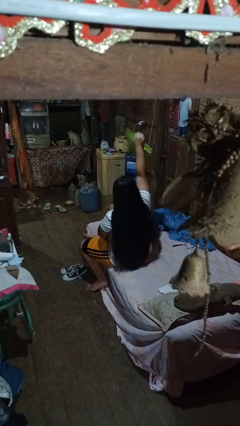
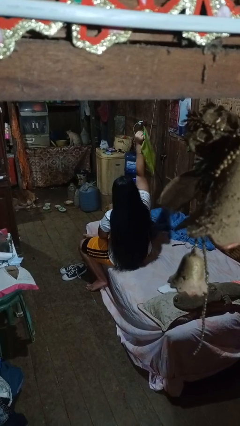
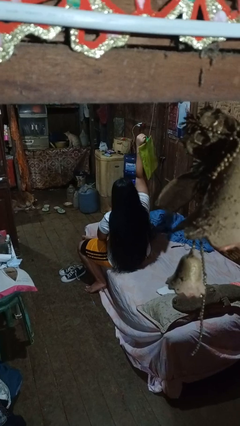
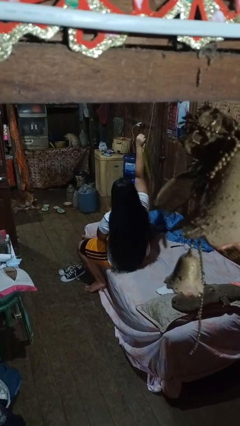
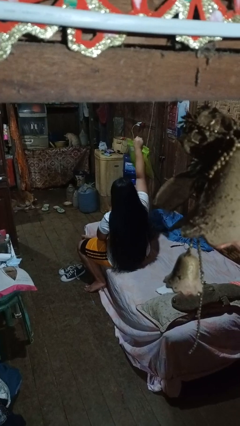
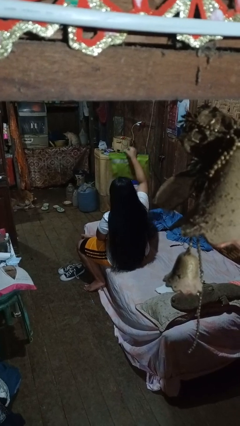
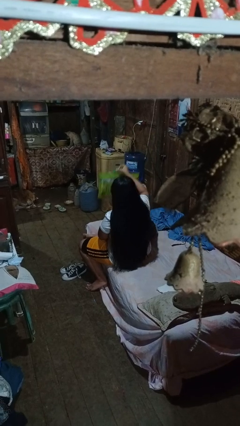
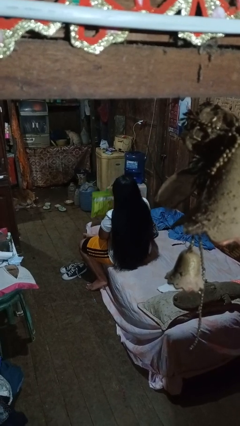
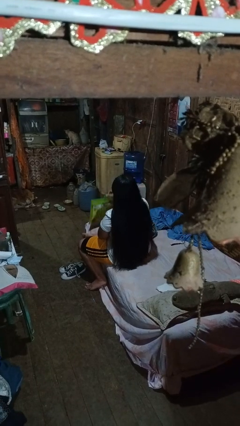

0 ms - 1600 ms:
person holds object above head

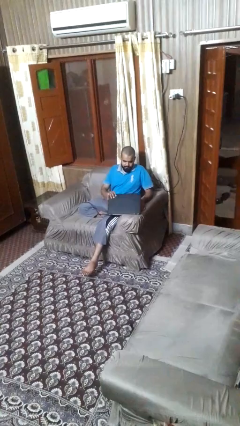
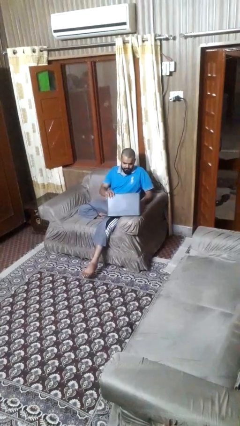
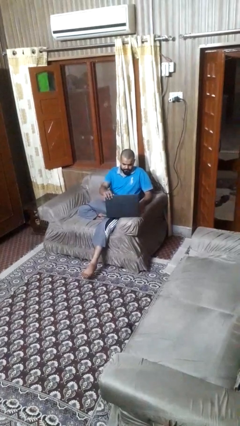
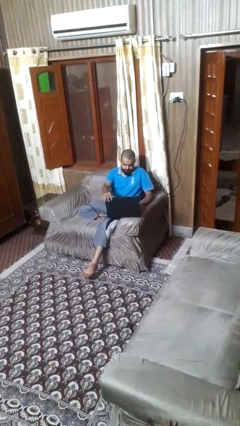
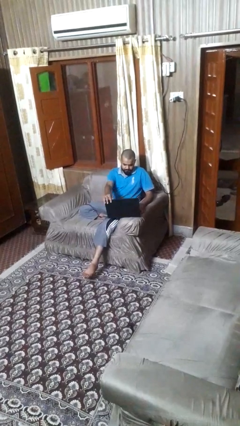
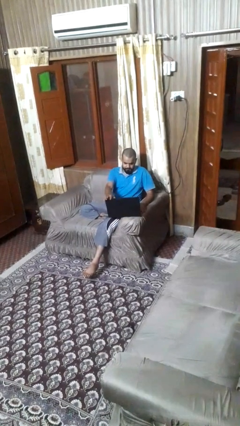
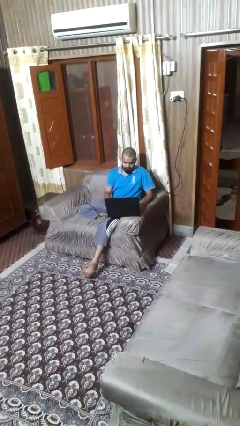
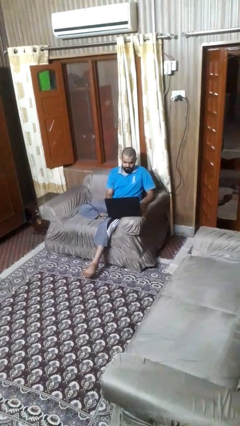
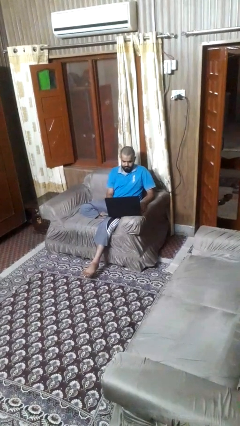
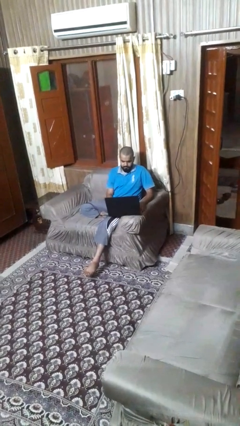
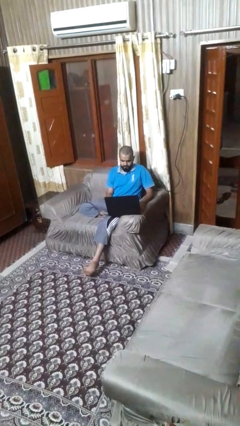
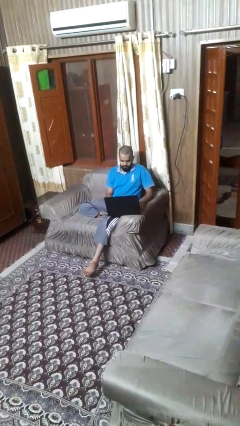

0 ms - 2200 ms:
person opens laptop

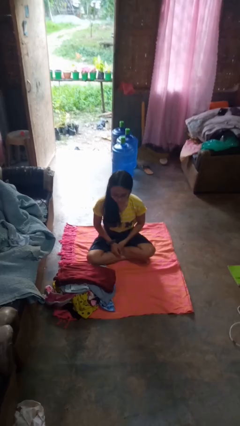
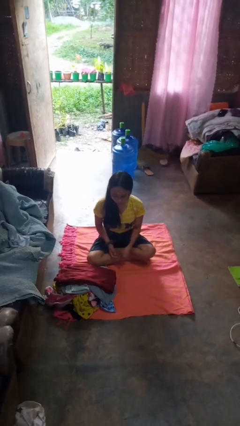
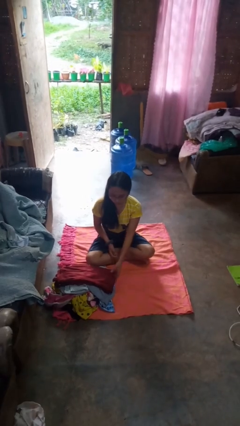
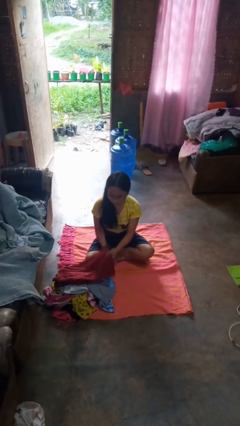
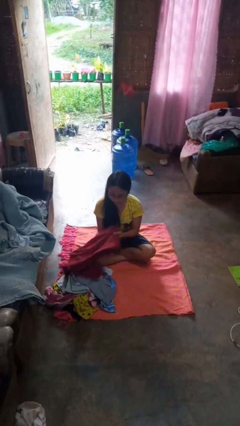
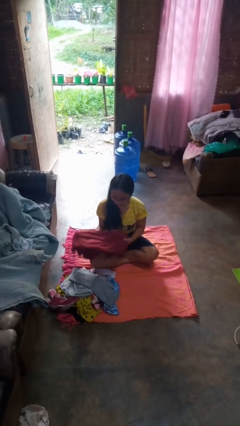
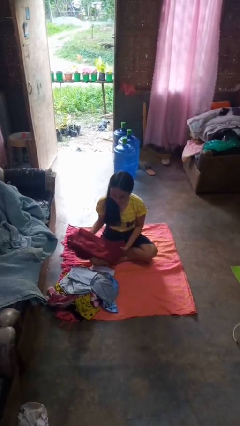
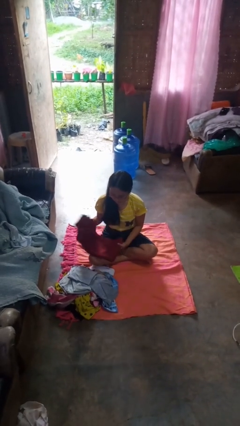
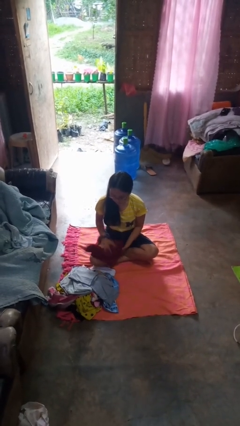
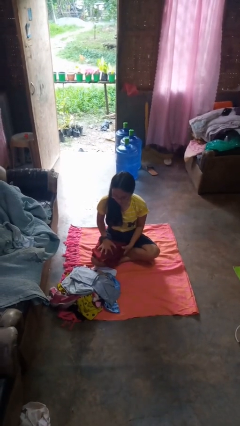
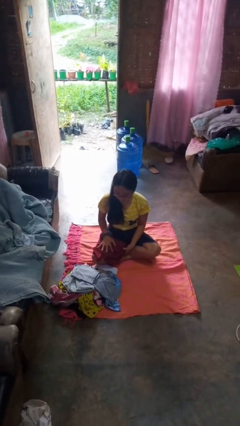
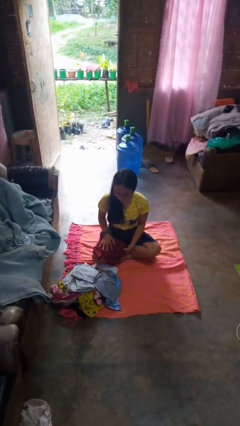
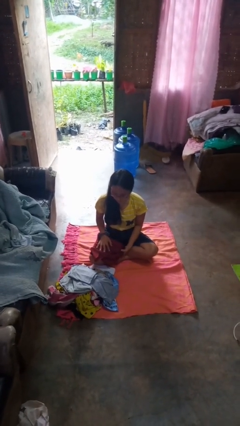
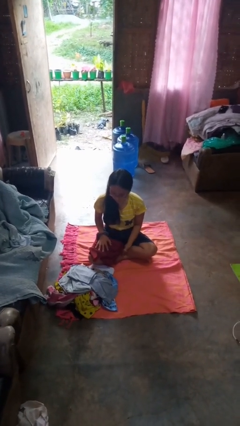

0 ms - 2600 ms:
person folds pants

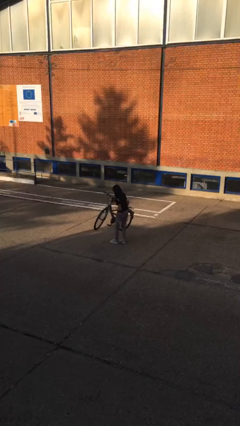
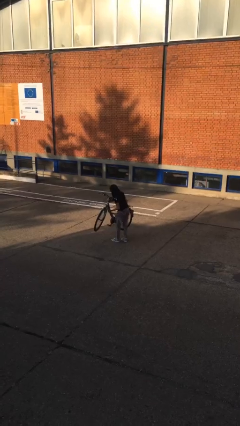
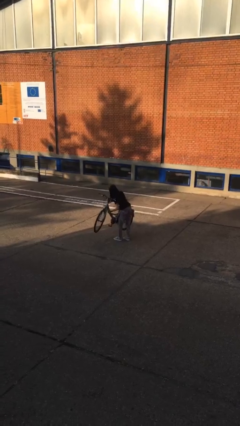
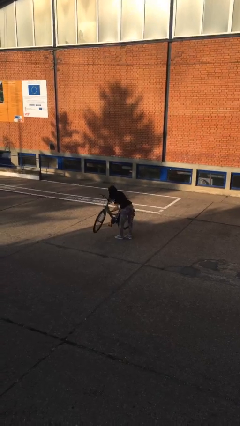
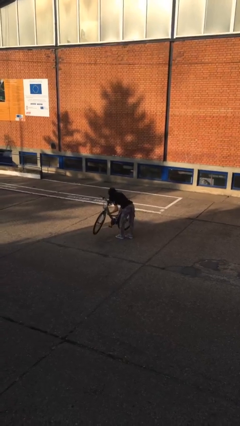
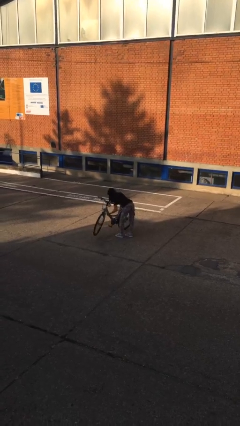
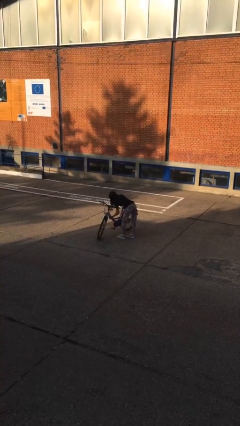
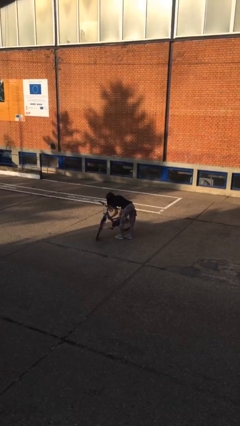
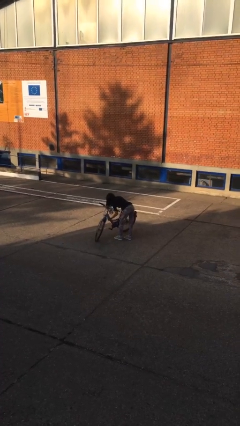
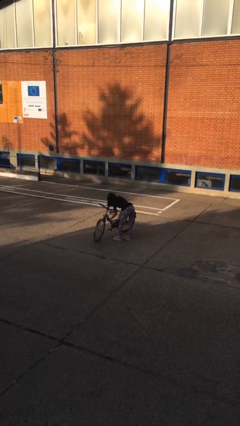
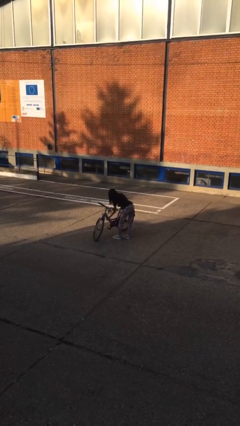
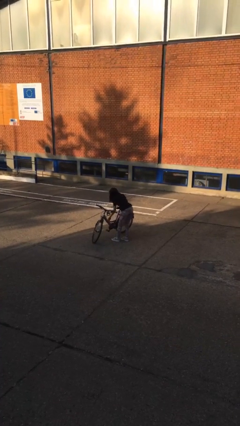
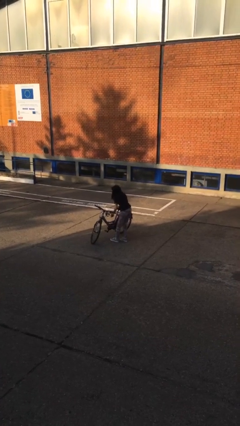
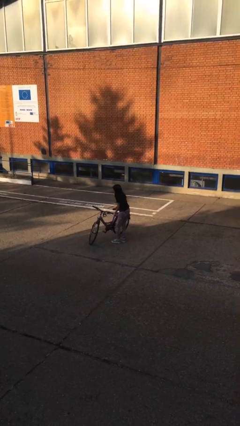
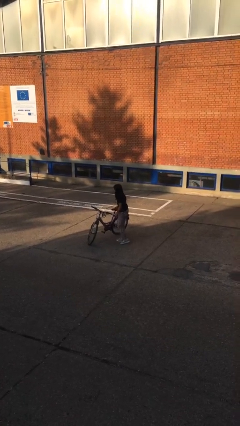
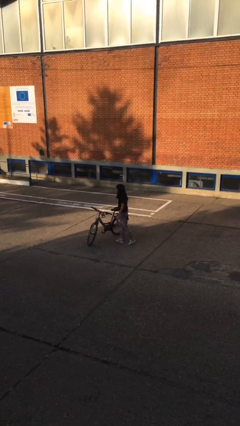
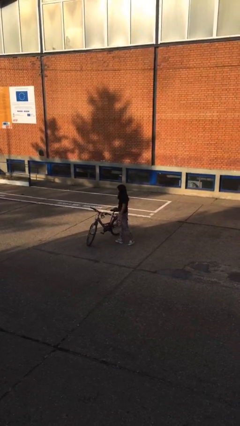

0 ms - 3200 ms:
person puts down object on floor

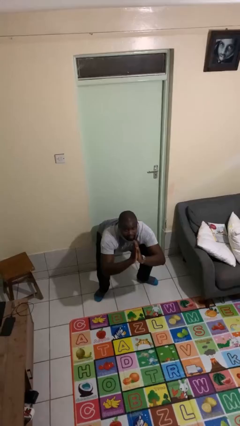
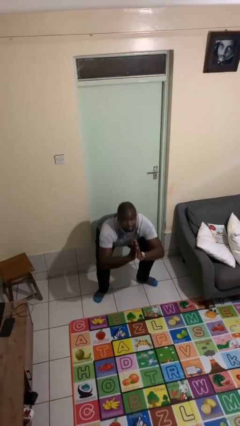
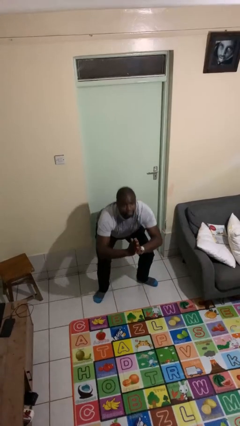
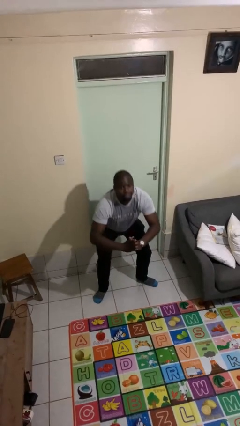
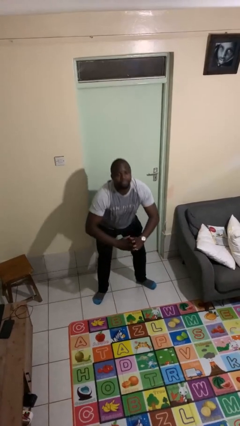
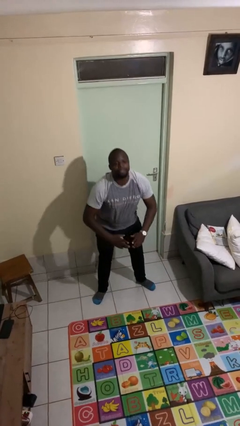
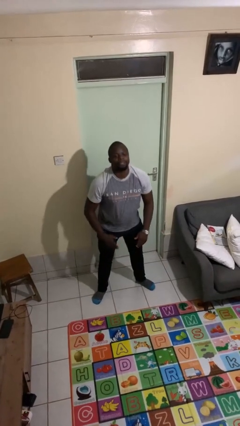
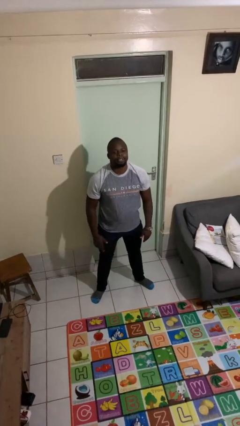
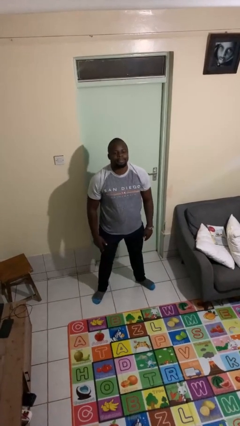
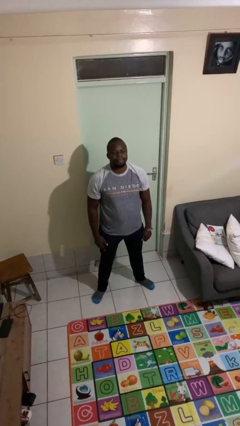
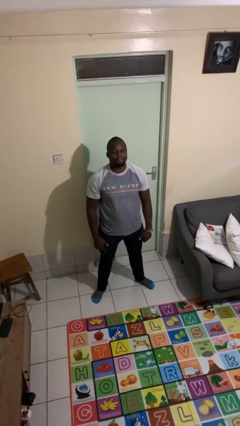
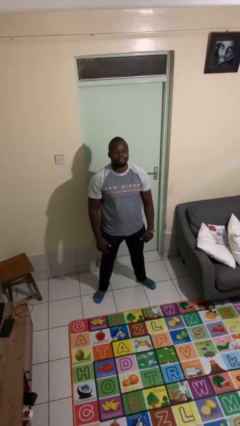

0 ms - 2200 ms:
person stands up

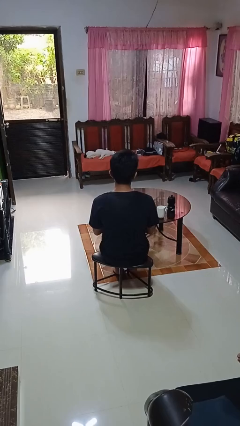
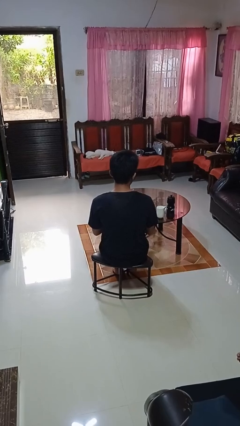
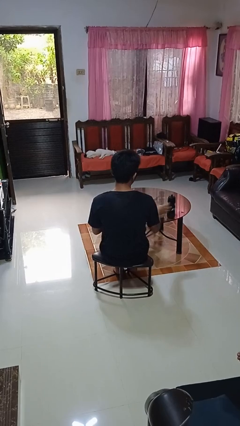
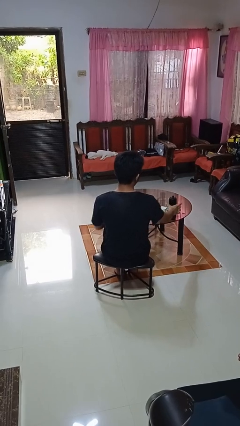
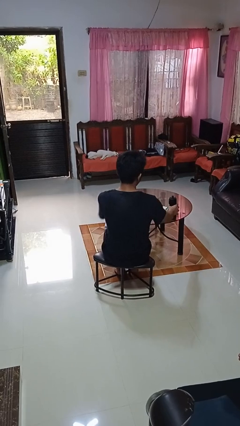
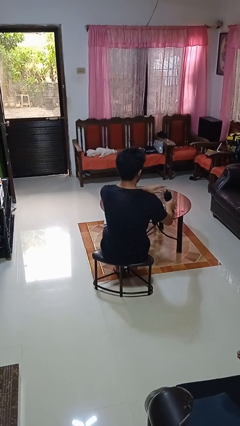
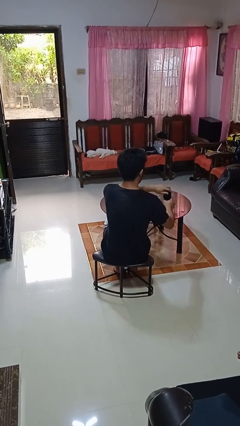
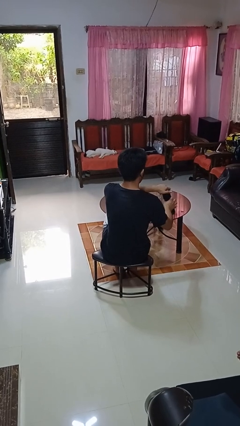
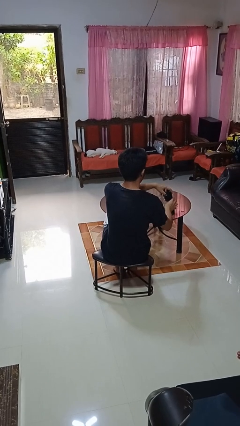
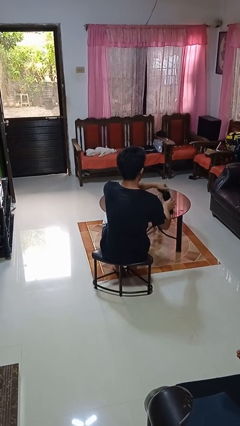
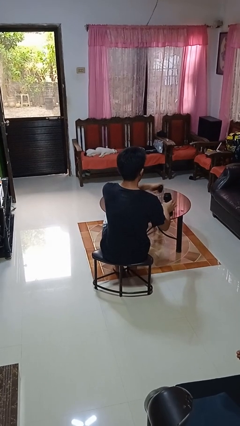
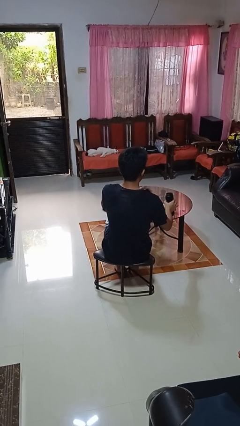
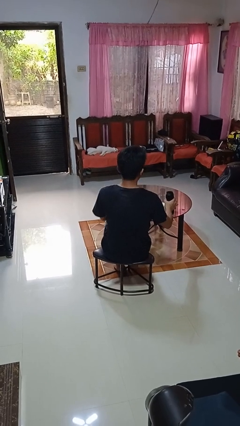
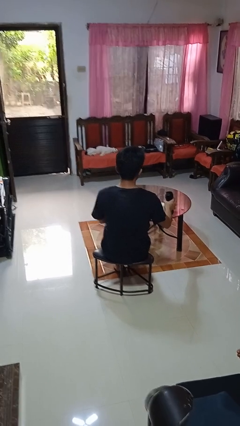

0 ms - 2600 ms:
person unscrews lid from bottle

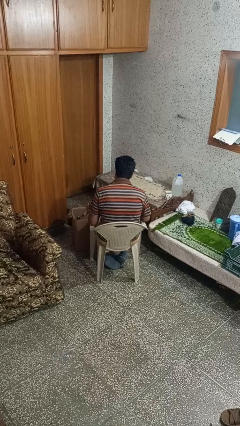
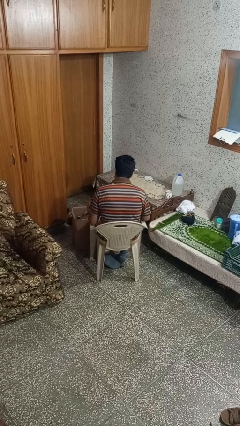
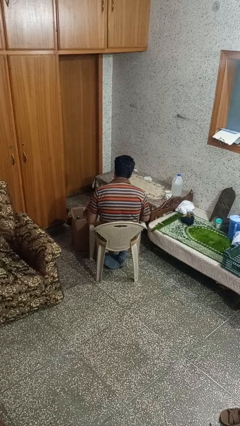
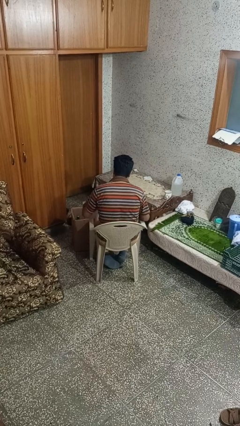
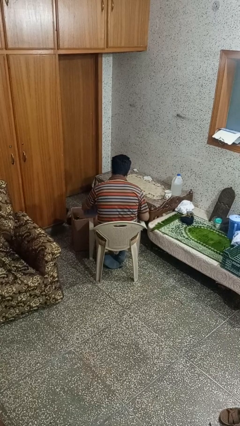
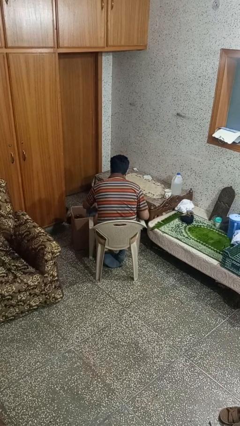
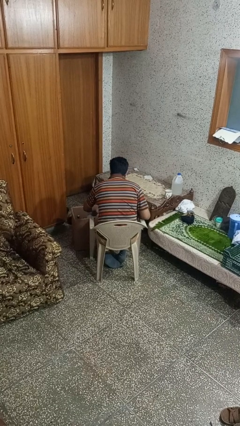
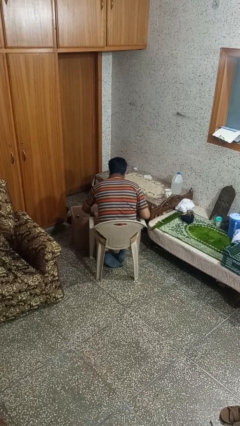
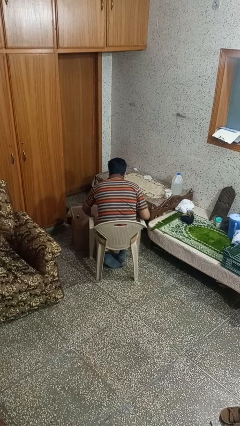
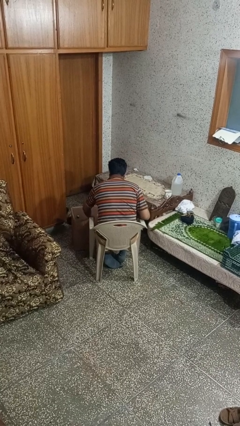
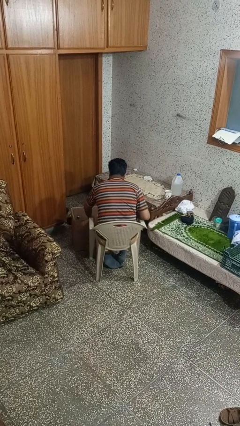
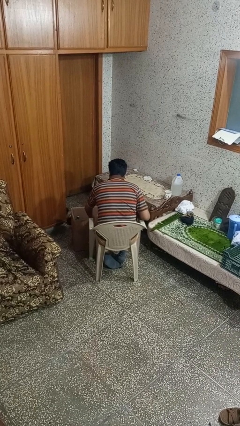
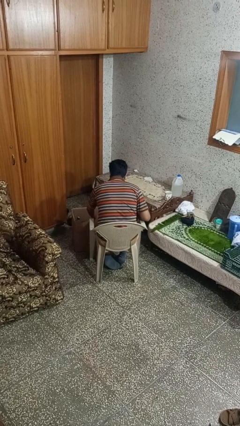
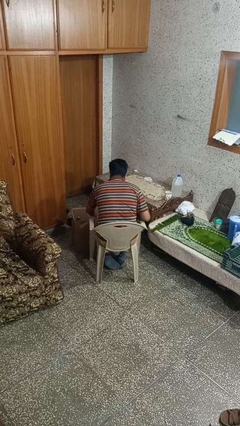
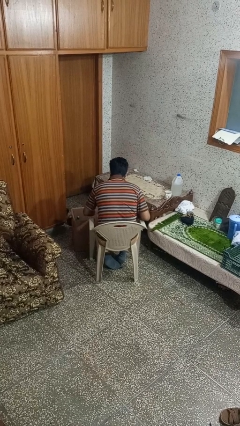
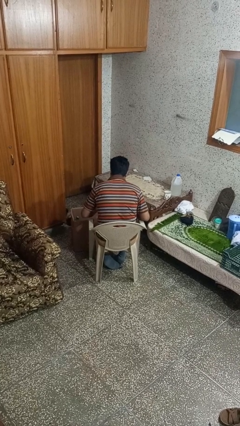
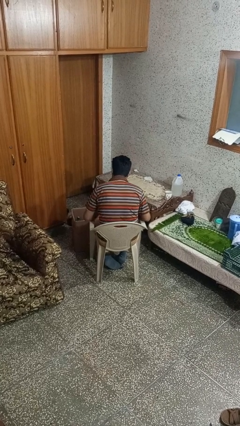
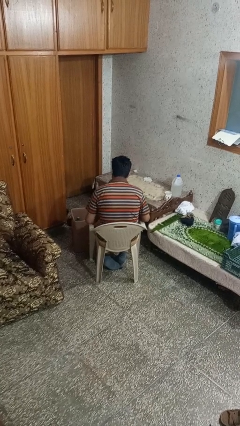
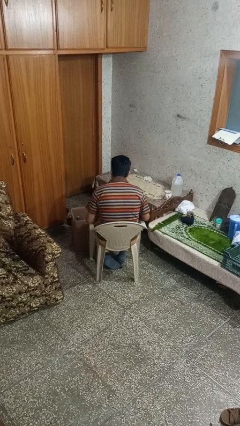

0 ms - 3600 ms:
person puts object into box
